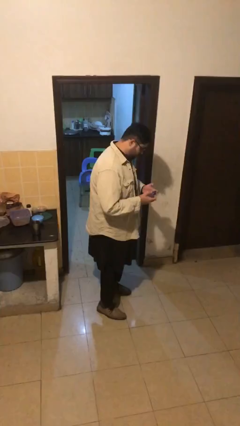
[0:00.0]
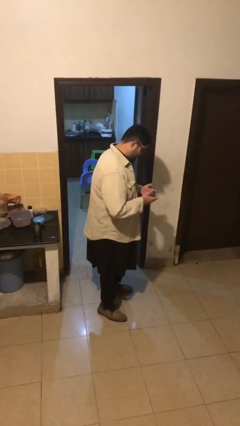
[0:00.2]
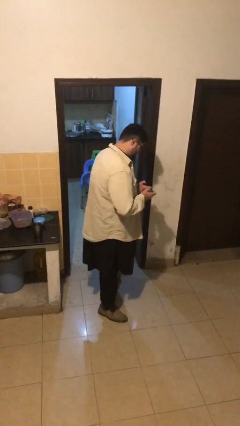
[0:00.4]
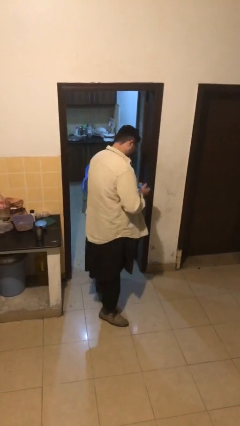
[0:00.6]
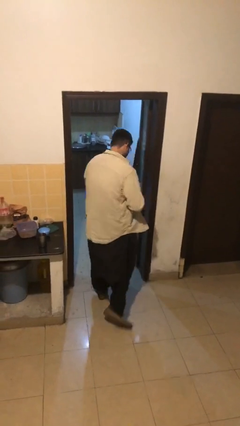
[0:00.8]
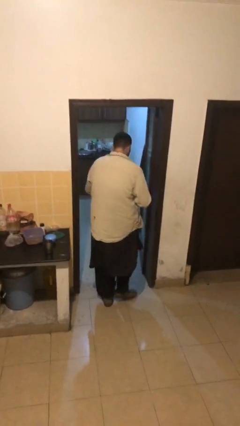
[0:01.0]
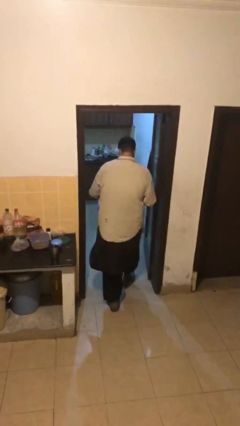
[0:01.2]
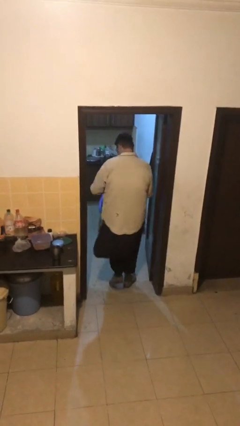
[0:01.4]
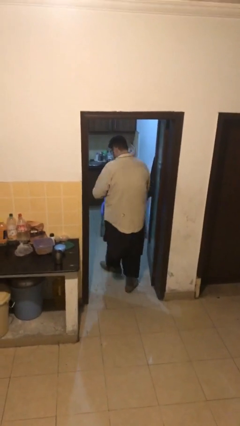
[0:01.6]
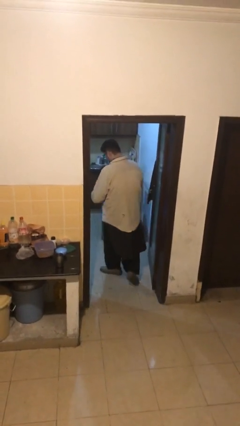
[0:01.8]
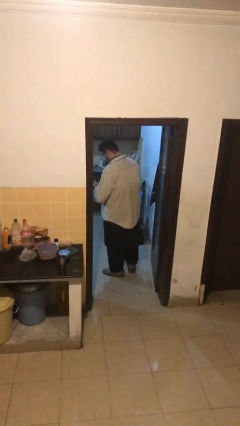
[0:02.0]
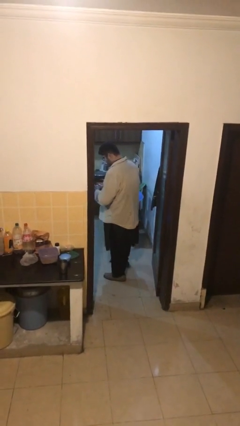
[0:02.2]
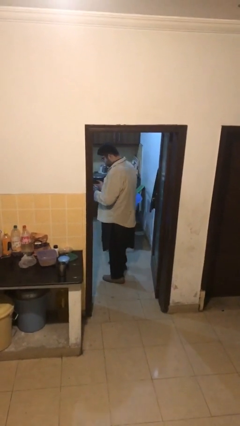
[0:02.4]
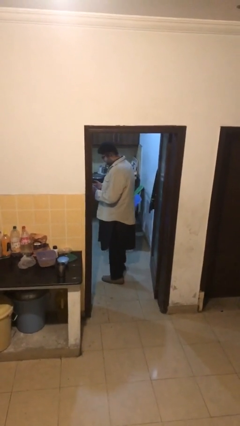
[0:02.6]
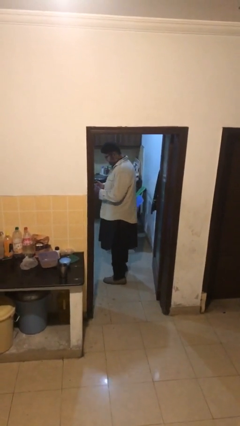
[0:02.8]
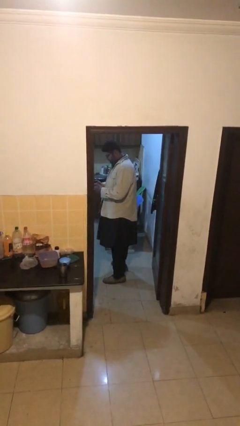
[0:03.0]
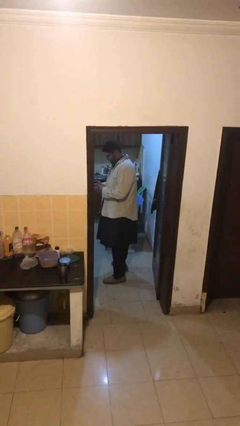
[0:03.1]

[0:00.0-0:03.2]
person exits scene through structure

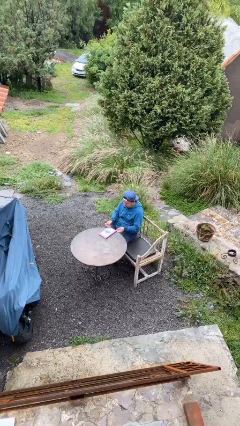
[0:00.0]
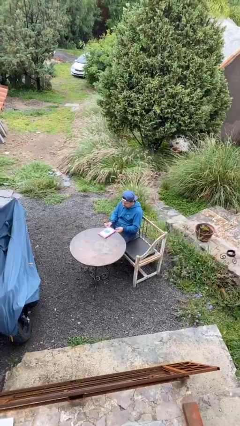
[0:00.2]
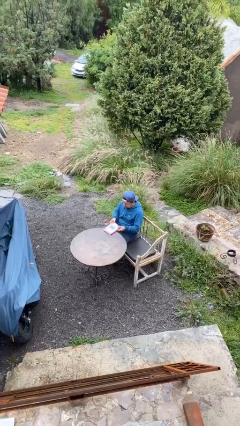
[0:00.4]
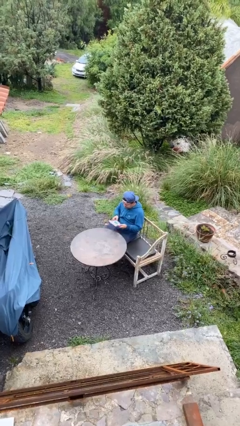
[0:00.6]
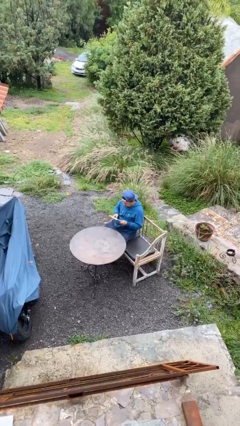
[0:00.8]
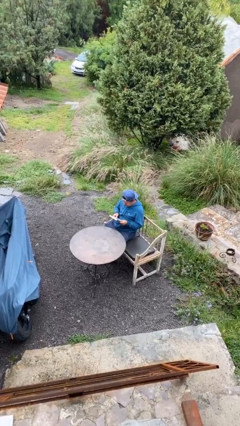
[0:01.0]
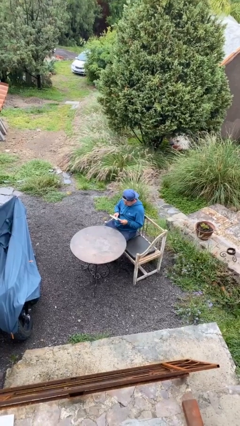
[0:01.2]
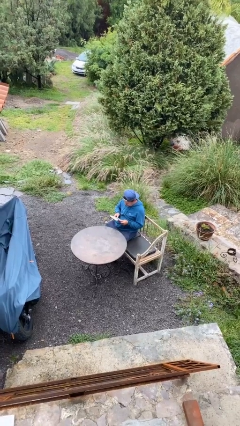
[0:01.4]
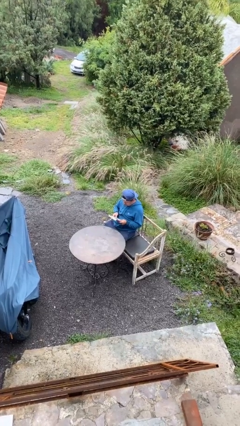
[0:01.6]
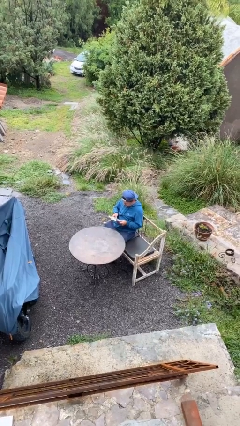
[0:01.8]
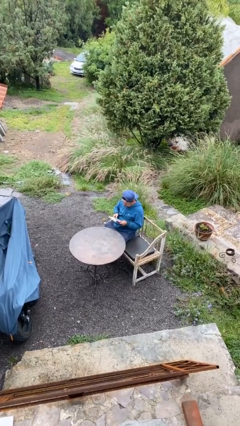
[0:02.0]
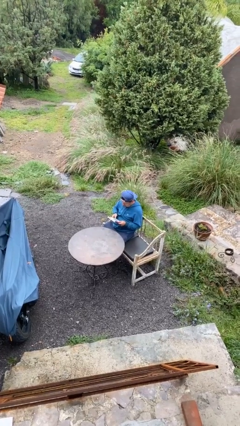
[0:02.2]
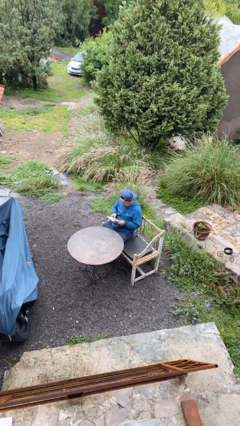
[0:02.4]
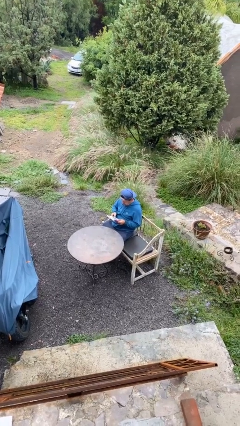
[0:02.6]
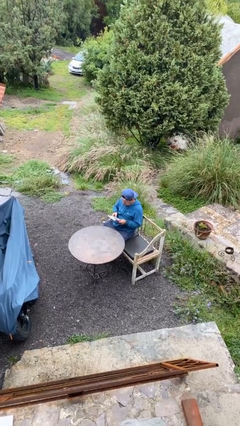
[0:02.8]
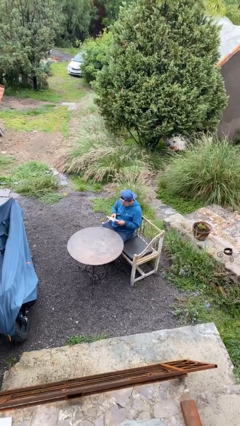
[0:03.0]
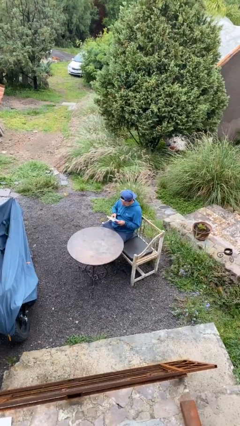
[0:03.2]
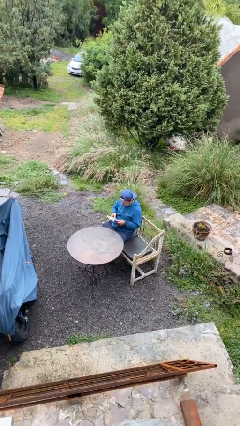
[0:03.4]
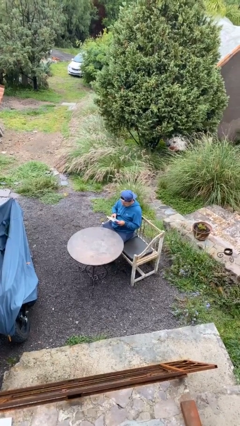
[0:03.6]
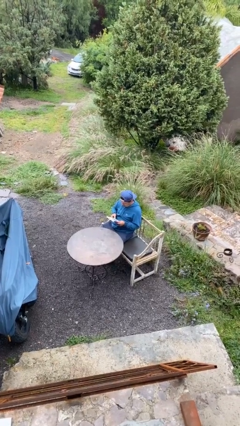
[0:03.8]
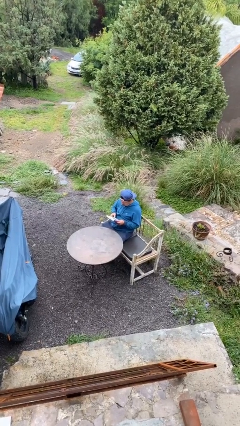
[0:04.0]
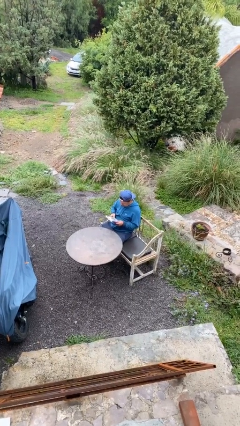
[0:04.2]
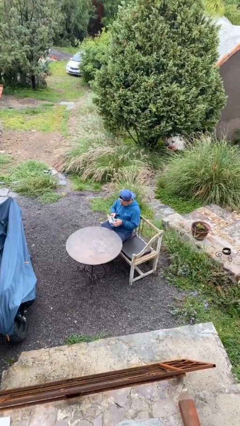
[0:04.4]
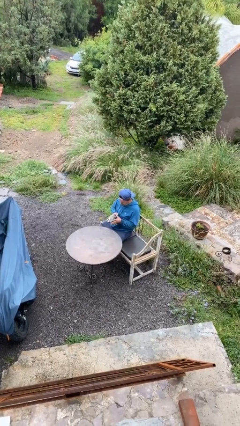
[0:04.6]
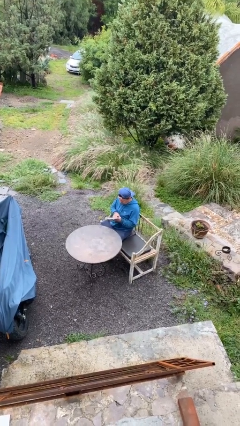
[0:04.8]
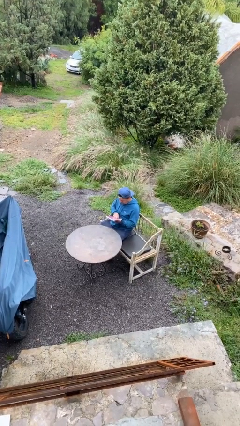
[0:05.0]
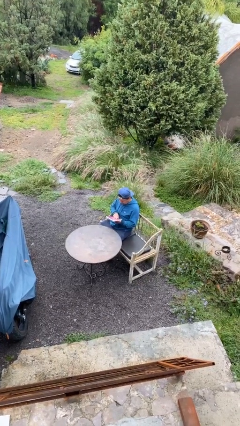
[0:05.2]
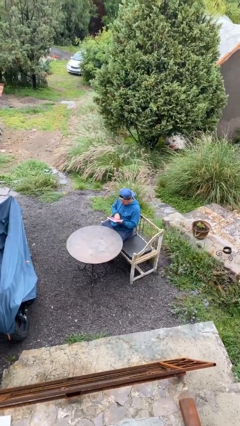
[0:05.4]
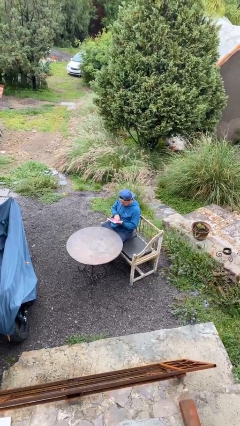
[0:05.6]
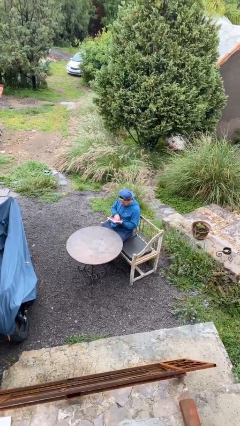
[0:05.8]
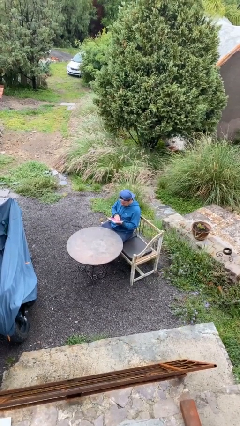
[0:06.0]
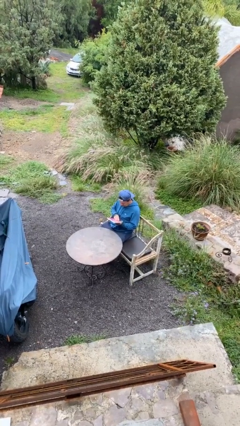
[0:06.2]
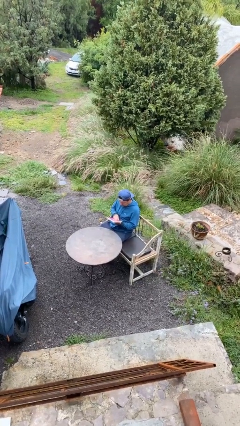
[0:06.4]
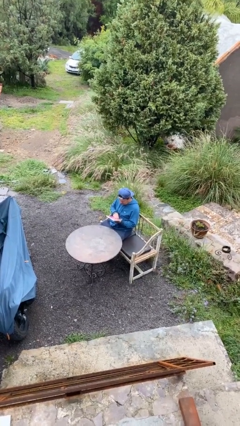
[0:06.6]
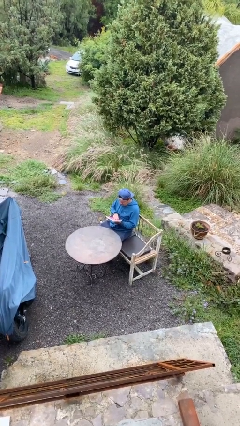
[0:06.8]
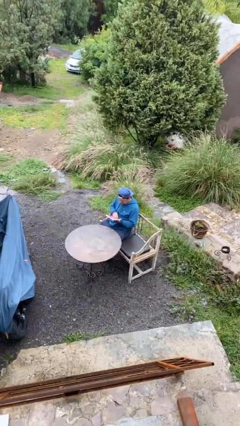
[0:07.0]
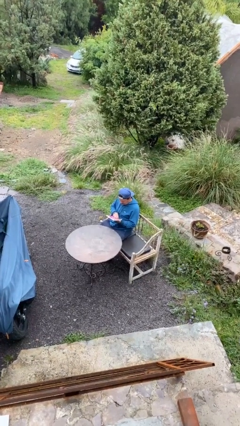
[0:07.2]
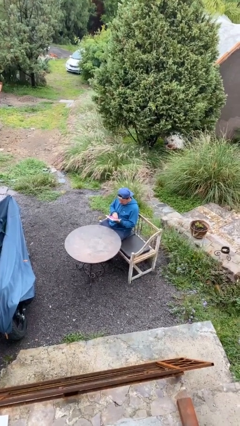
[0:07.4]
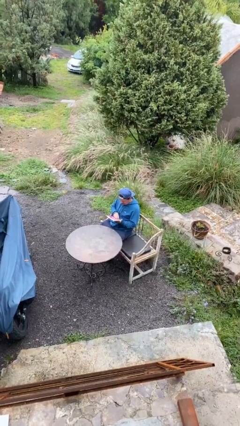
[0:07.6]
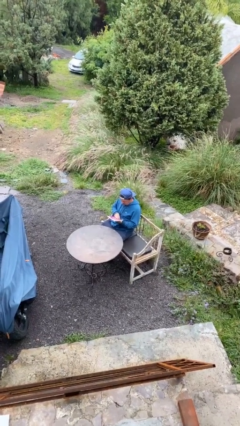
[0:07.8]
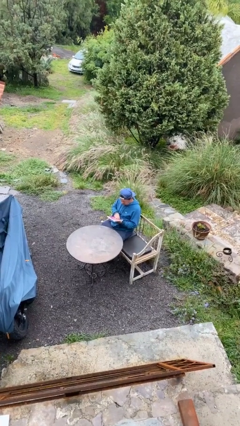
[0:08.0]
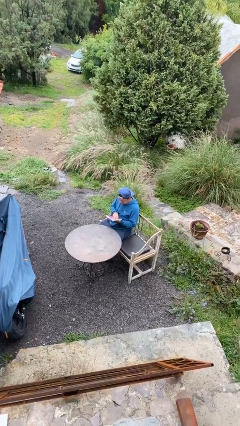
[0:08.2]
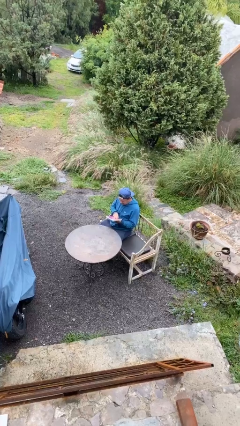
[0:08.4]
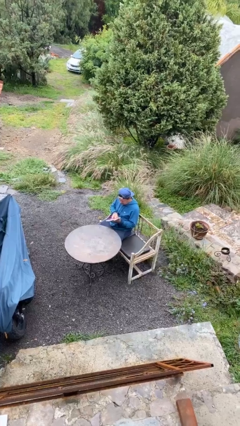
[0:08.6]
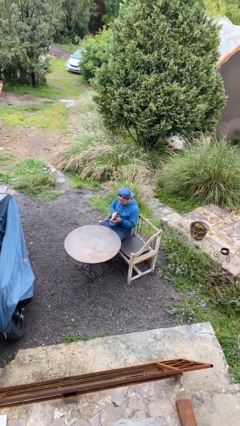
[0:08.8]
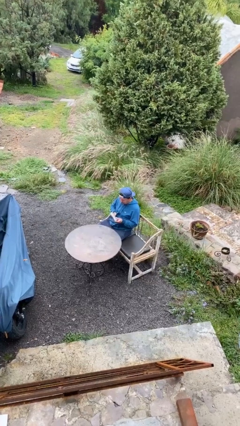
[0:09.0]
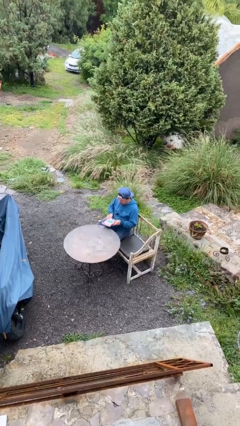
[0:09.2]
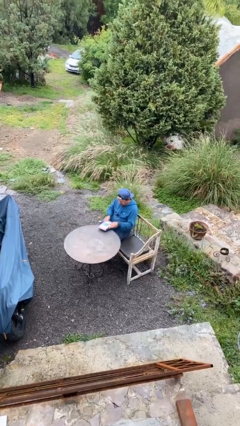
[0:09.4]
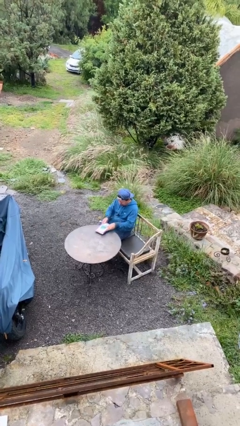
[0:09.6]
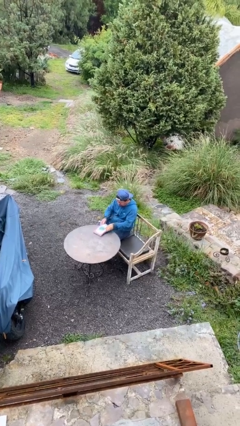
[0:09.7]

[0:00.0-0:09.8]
person reads document

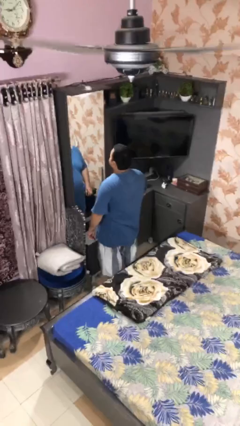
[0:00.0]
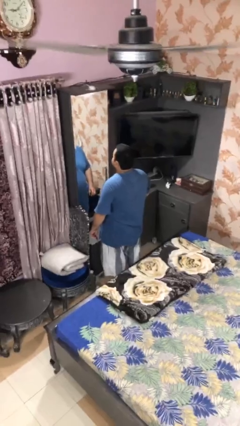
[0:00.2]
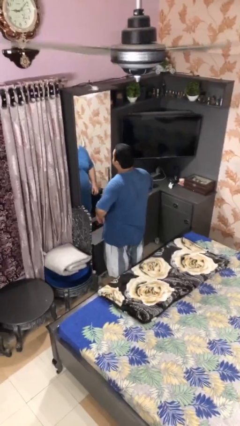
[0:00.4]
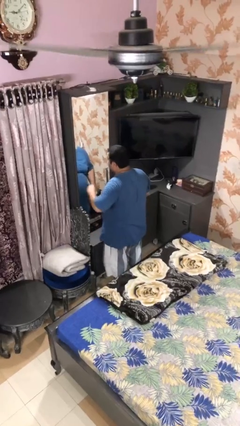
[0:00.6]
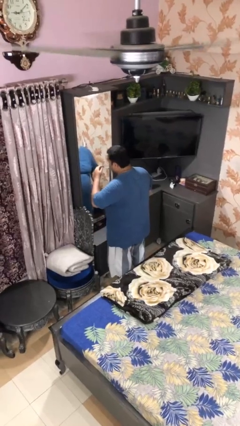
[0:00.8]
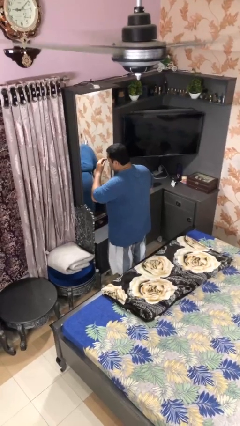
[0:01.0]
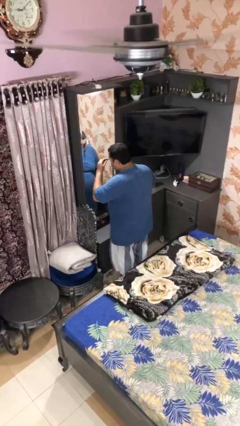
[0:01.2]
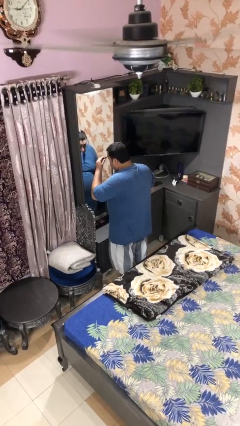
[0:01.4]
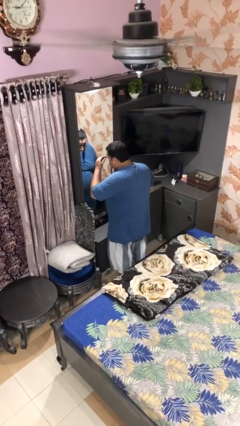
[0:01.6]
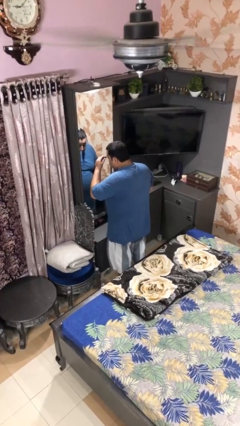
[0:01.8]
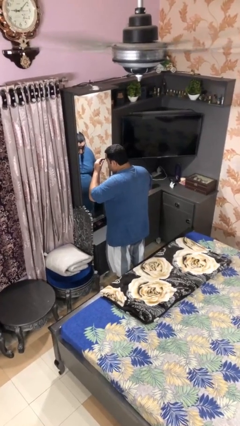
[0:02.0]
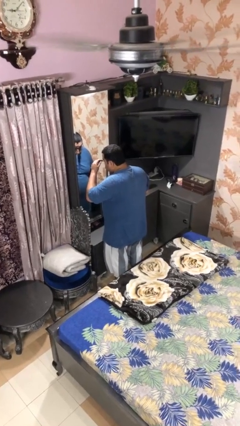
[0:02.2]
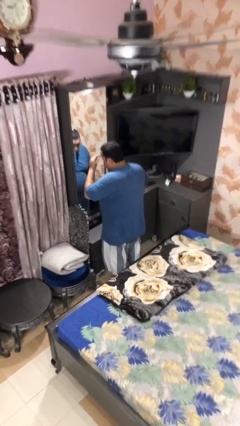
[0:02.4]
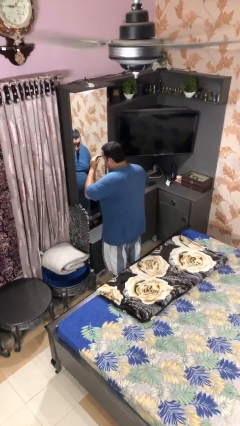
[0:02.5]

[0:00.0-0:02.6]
person applies eye makeup

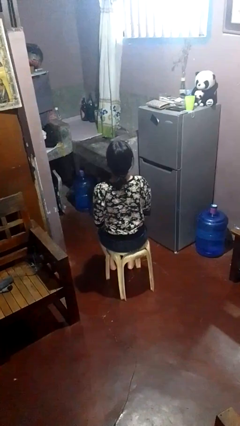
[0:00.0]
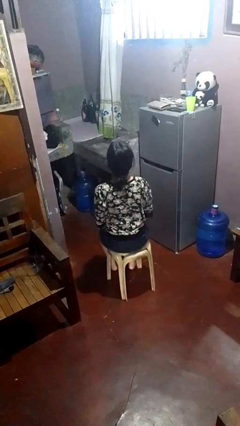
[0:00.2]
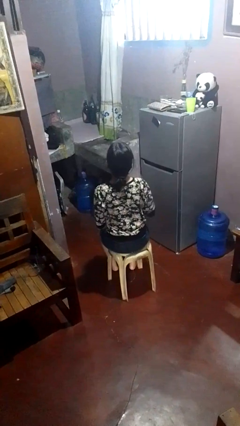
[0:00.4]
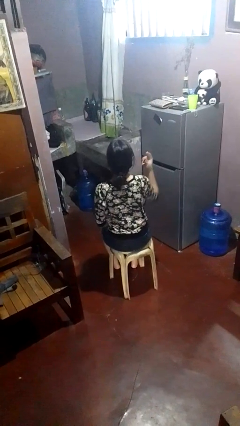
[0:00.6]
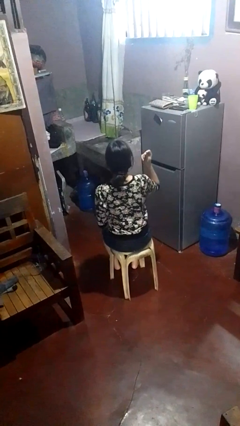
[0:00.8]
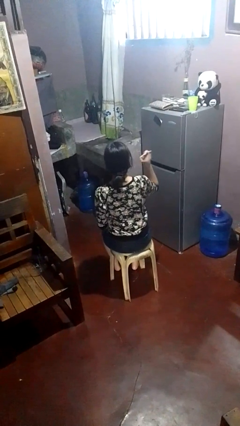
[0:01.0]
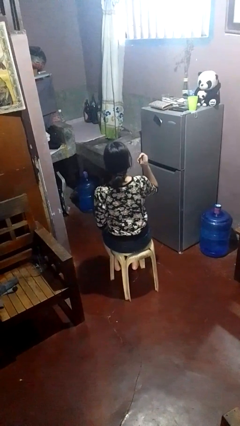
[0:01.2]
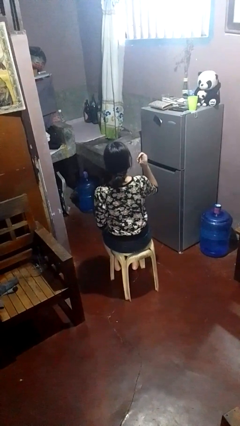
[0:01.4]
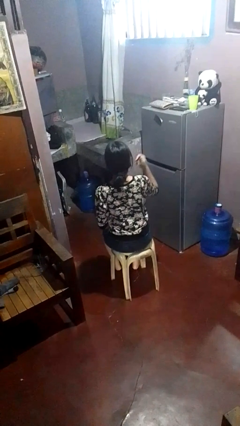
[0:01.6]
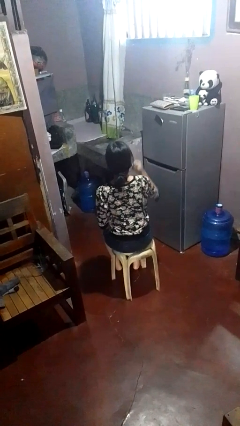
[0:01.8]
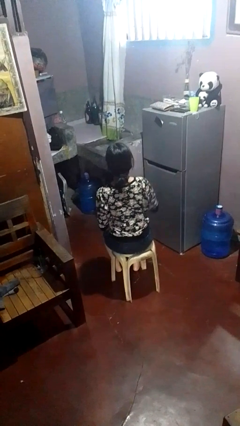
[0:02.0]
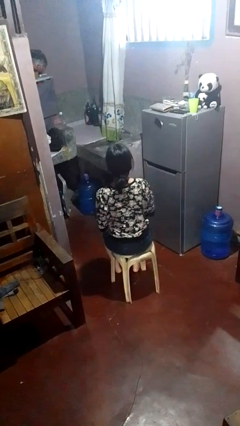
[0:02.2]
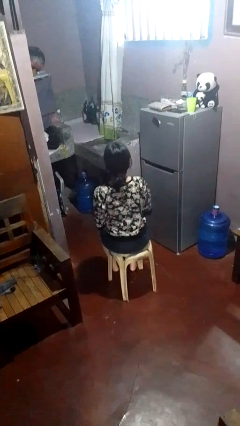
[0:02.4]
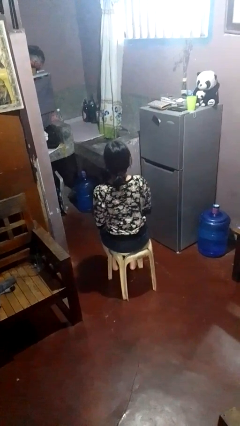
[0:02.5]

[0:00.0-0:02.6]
person snaps fingers
